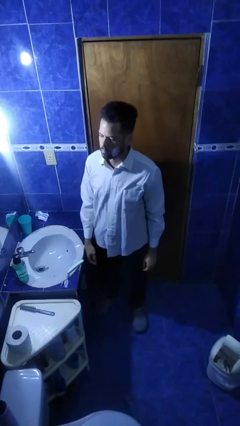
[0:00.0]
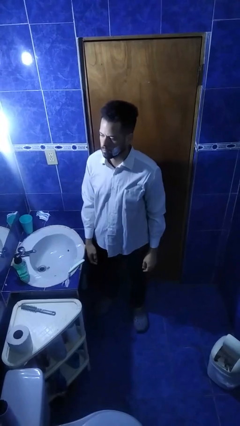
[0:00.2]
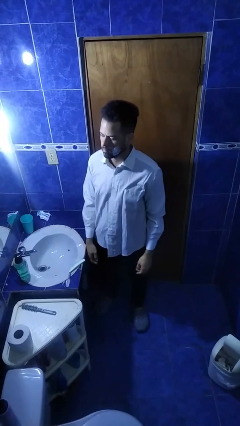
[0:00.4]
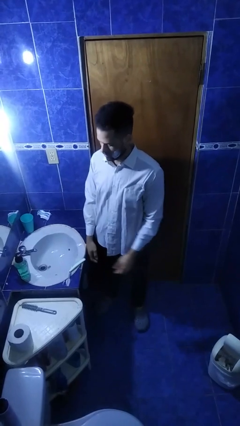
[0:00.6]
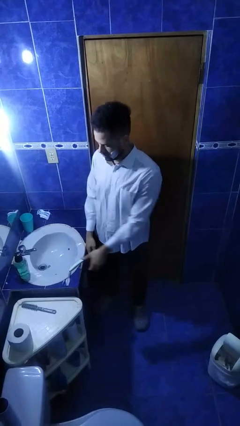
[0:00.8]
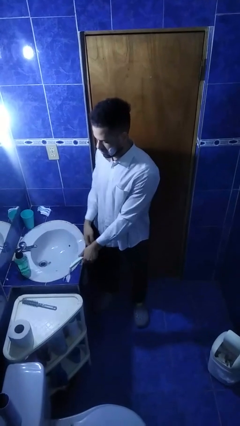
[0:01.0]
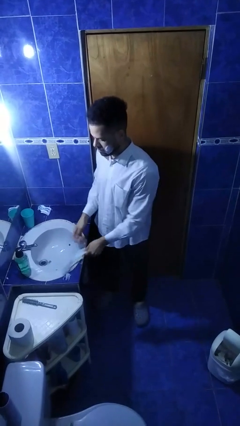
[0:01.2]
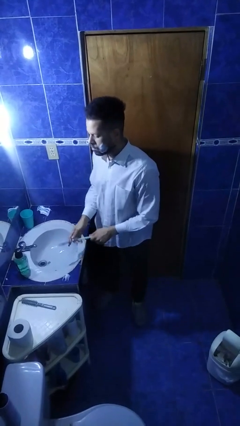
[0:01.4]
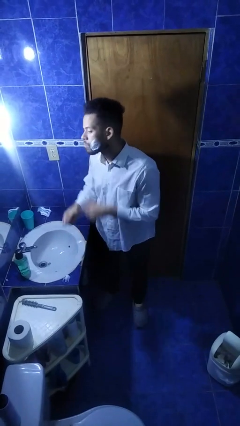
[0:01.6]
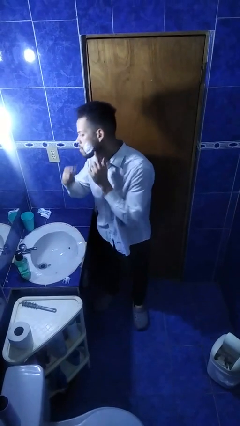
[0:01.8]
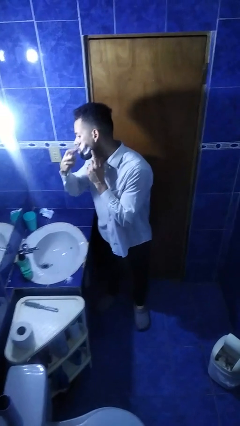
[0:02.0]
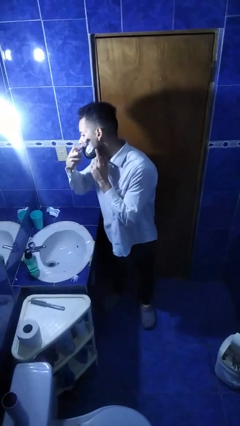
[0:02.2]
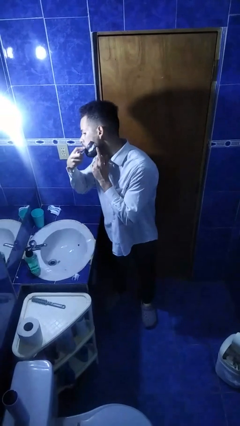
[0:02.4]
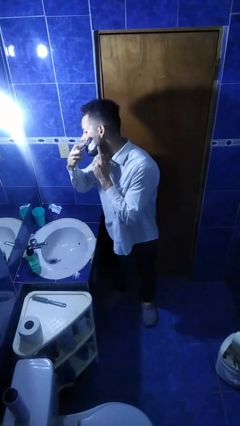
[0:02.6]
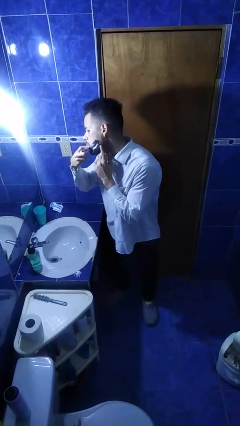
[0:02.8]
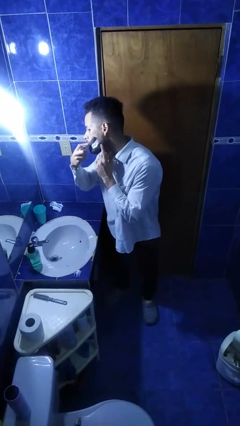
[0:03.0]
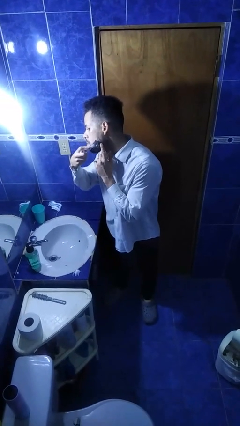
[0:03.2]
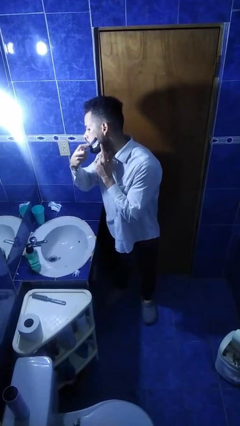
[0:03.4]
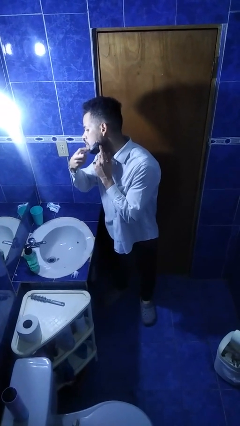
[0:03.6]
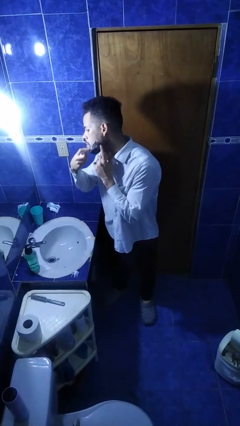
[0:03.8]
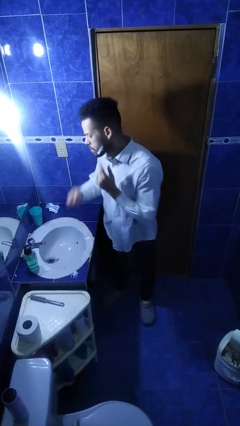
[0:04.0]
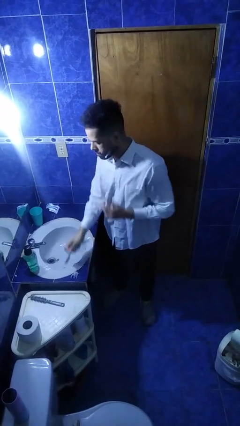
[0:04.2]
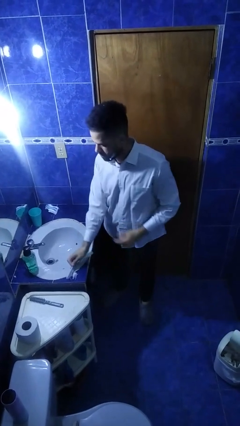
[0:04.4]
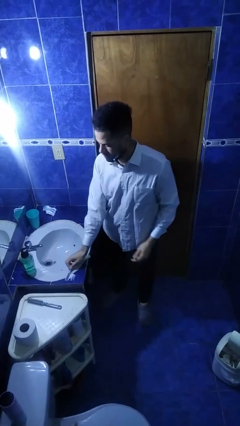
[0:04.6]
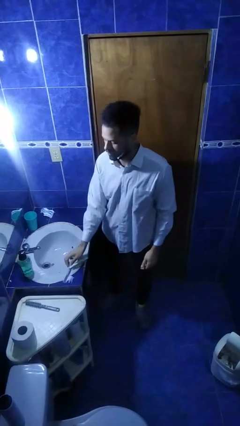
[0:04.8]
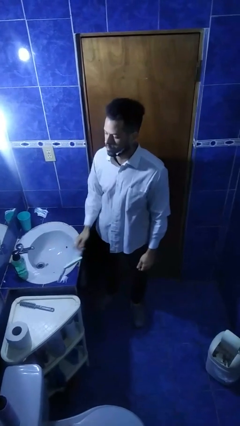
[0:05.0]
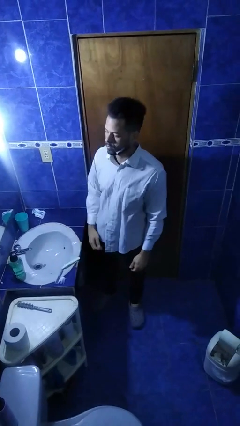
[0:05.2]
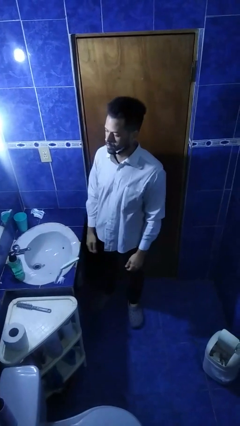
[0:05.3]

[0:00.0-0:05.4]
person shaves face

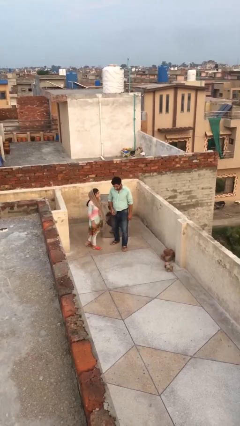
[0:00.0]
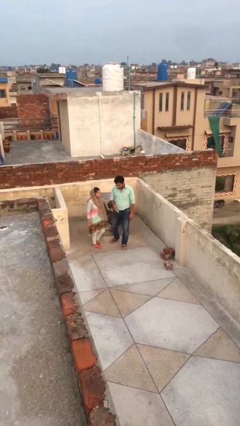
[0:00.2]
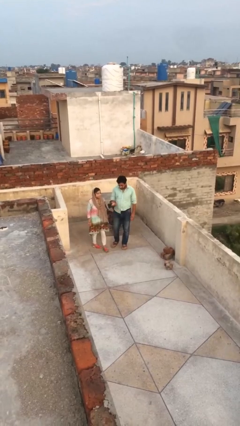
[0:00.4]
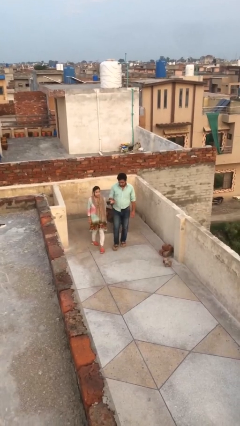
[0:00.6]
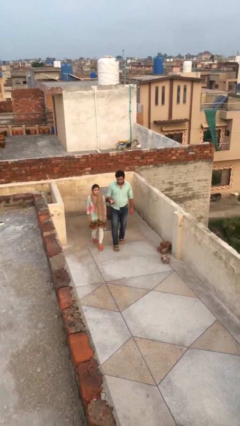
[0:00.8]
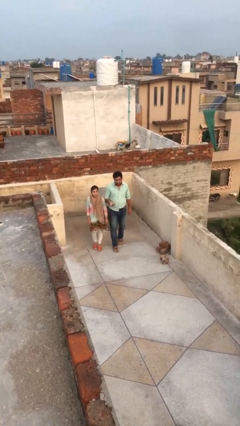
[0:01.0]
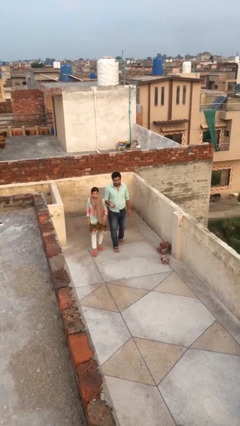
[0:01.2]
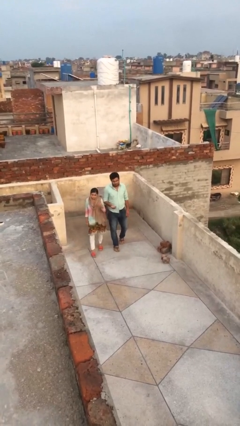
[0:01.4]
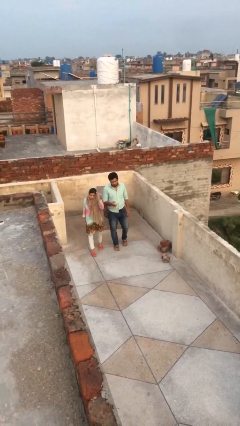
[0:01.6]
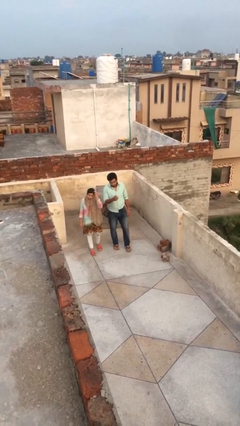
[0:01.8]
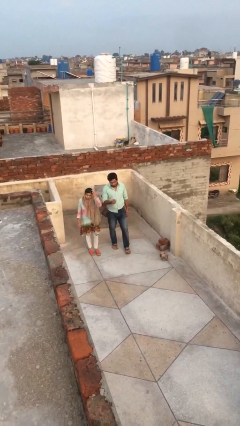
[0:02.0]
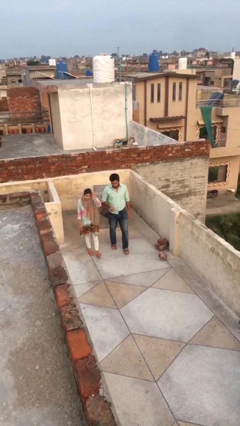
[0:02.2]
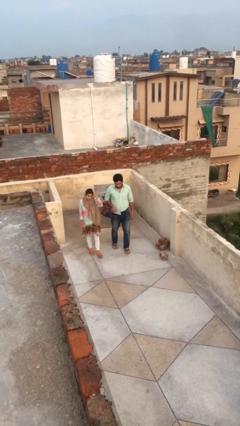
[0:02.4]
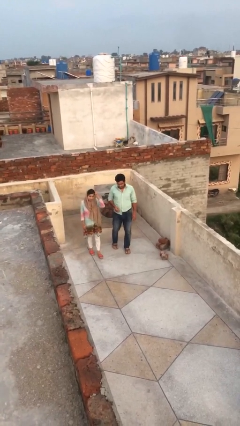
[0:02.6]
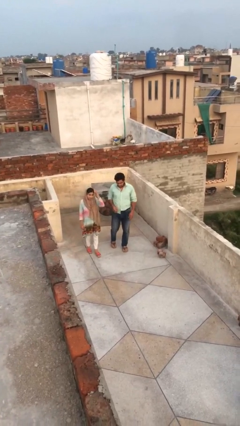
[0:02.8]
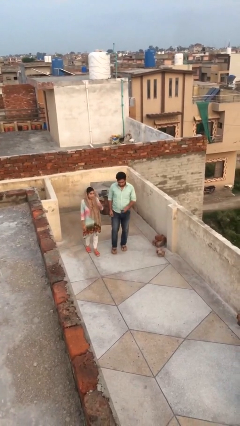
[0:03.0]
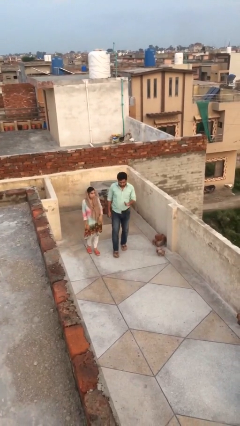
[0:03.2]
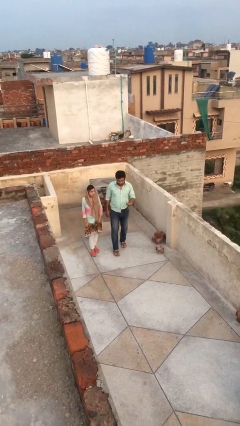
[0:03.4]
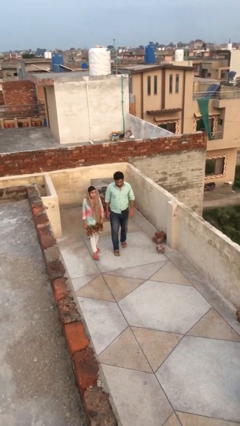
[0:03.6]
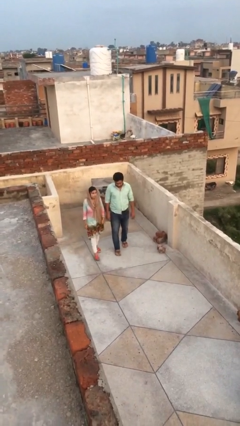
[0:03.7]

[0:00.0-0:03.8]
person talks to person

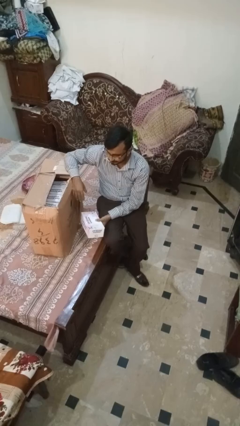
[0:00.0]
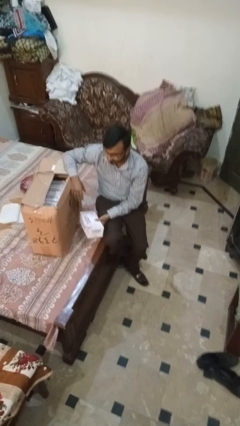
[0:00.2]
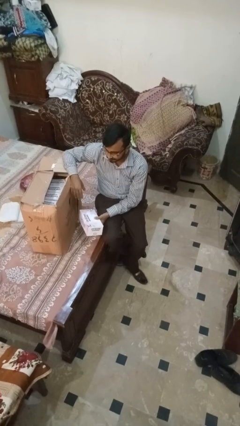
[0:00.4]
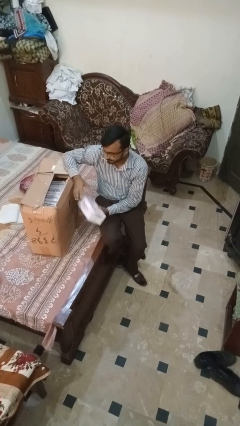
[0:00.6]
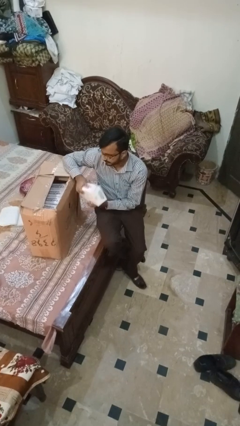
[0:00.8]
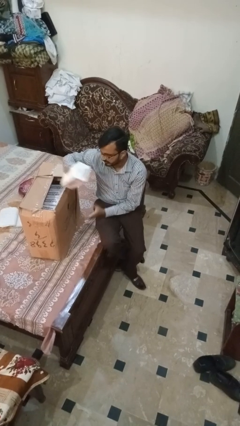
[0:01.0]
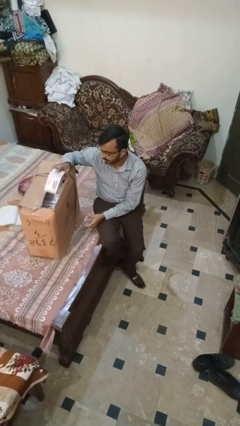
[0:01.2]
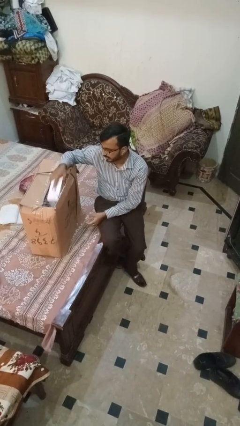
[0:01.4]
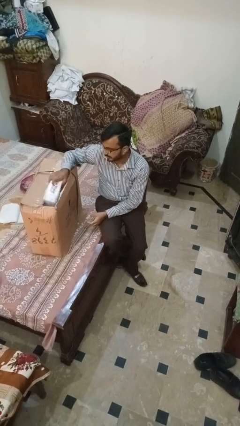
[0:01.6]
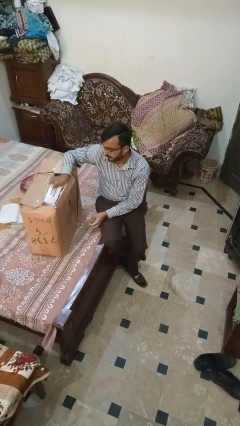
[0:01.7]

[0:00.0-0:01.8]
person puts object into box

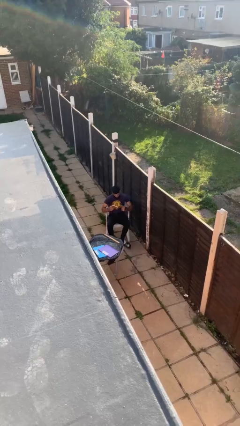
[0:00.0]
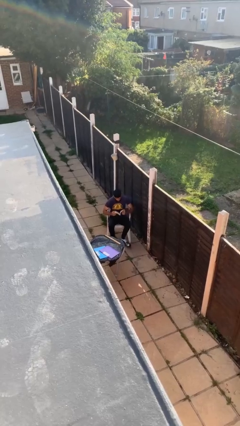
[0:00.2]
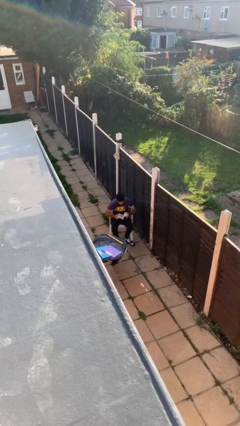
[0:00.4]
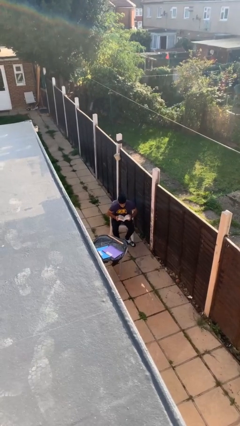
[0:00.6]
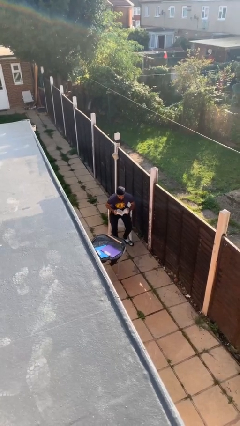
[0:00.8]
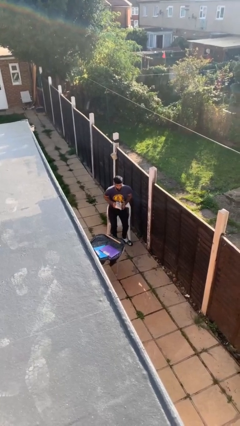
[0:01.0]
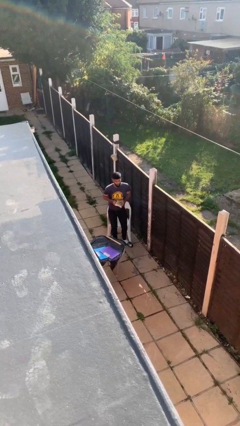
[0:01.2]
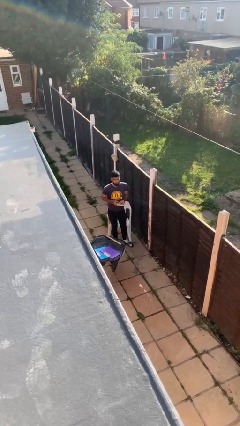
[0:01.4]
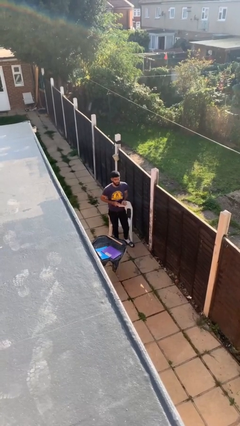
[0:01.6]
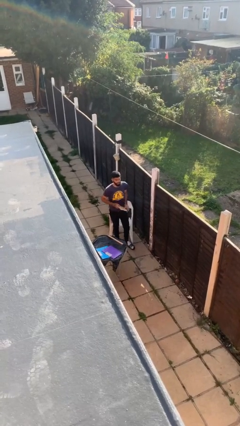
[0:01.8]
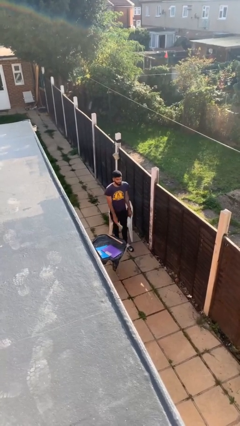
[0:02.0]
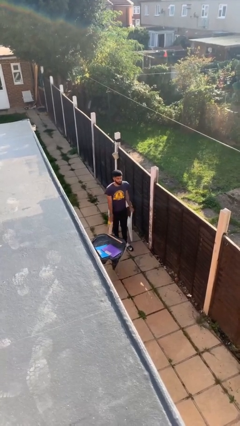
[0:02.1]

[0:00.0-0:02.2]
person stands up

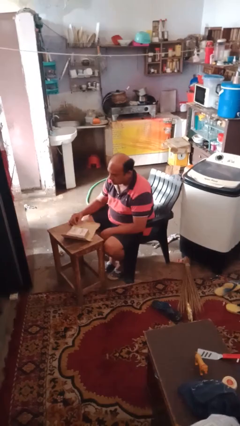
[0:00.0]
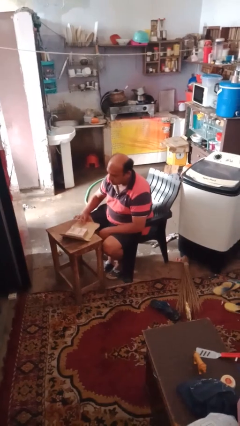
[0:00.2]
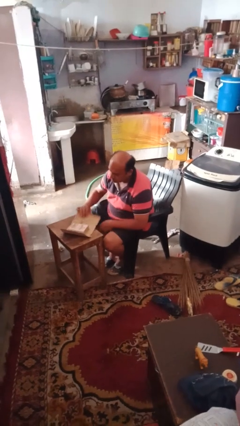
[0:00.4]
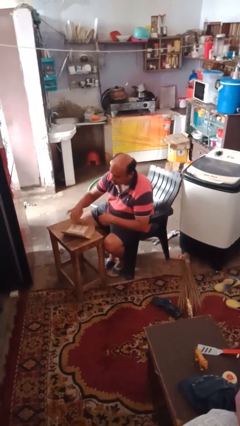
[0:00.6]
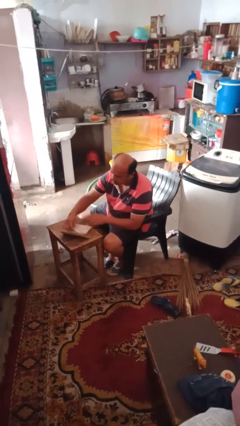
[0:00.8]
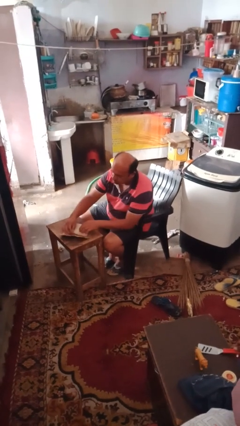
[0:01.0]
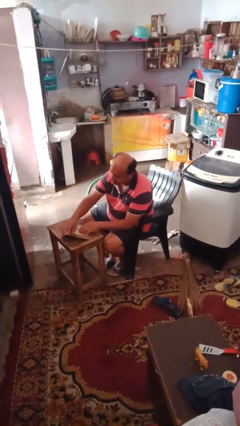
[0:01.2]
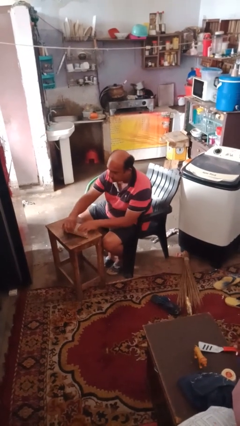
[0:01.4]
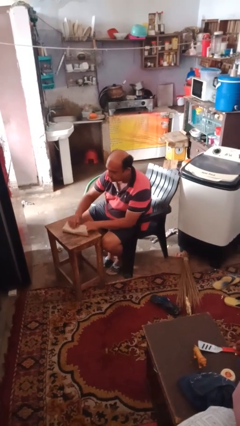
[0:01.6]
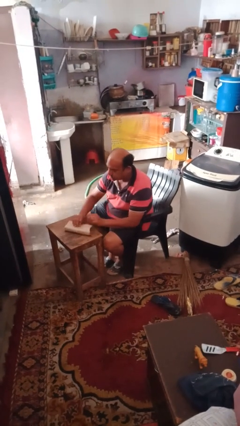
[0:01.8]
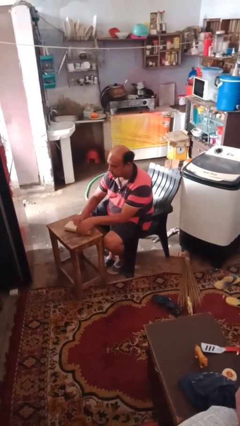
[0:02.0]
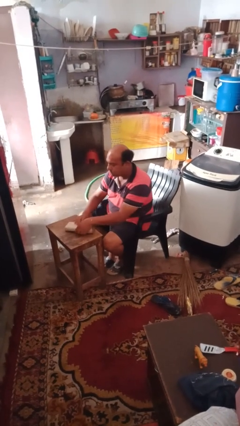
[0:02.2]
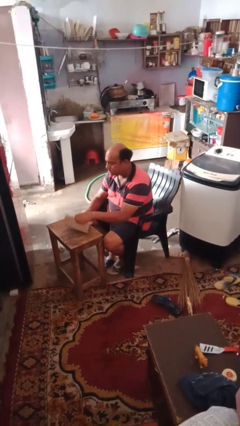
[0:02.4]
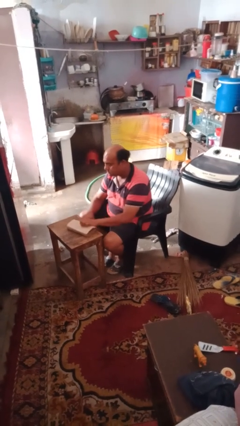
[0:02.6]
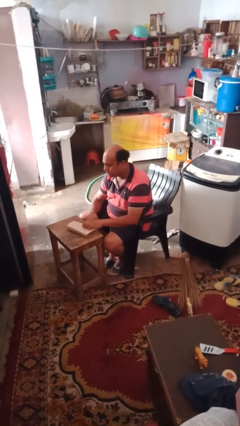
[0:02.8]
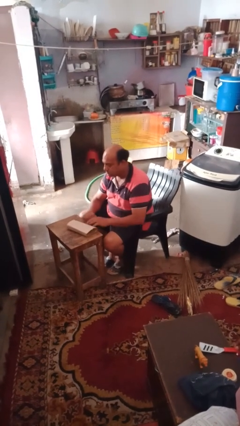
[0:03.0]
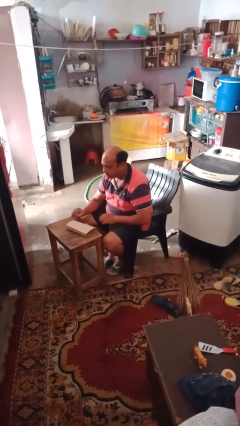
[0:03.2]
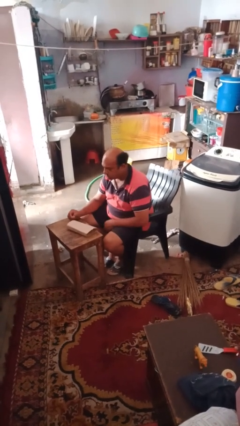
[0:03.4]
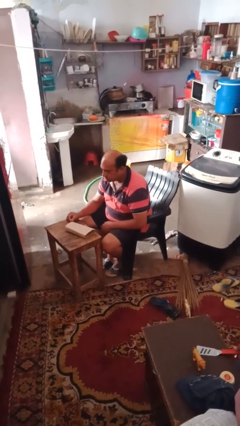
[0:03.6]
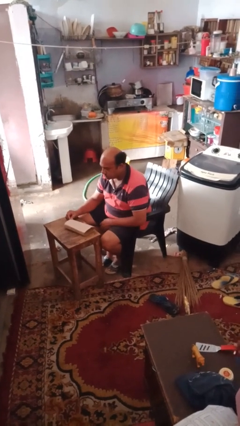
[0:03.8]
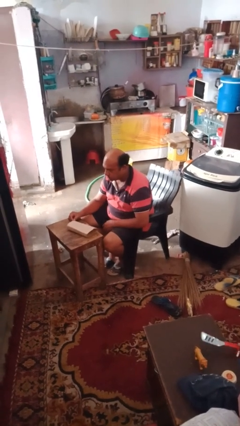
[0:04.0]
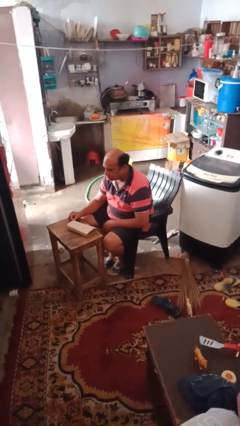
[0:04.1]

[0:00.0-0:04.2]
person wraps box
